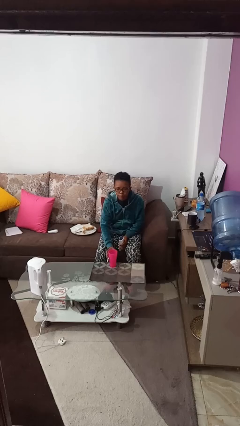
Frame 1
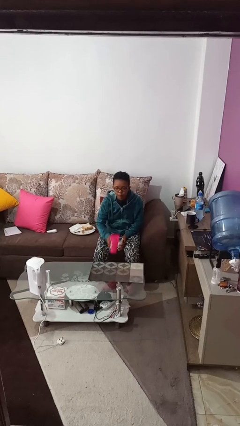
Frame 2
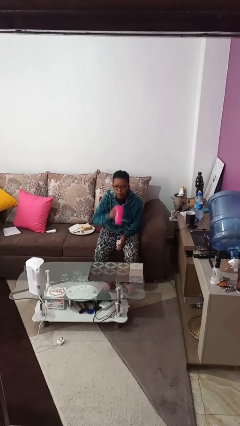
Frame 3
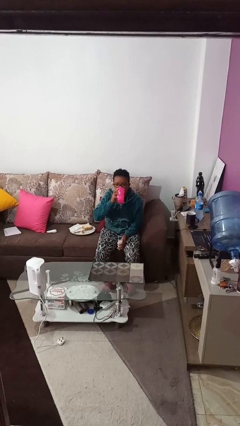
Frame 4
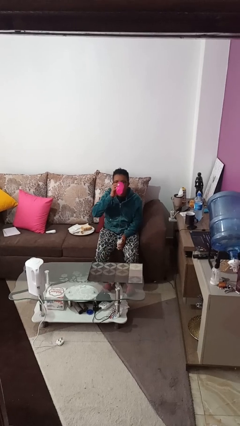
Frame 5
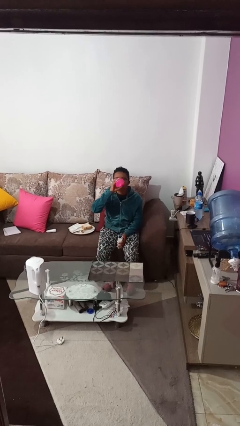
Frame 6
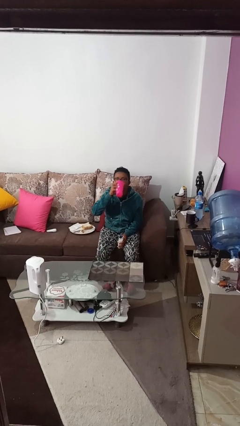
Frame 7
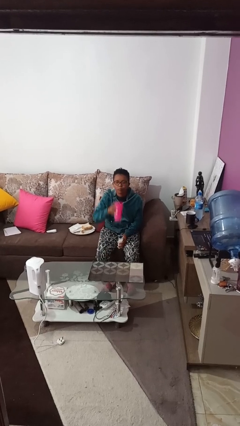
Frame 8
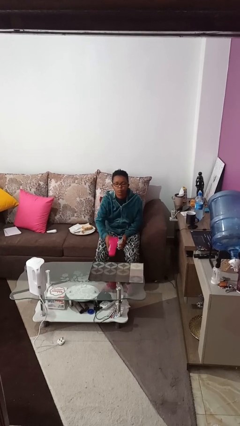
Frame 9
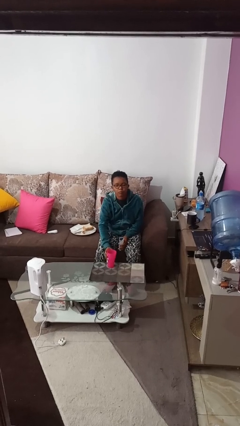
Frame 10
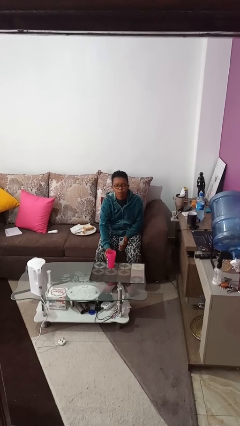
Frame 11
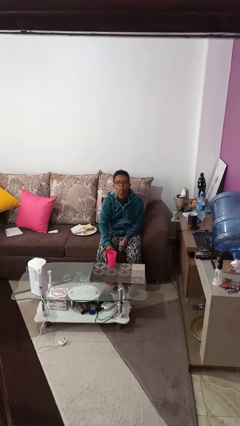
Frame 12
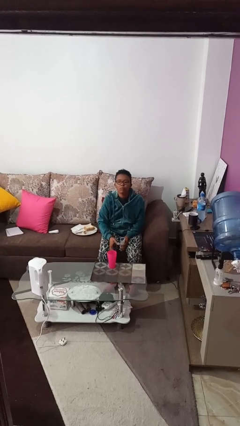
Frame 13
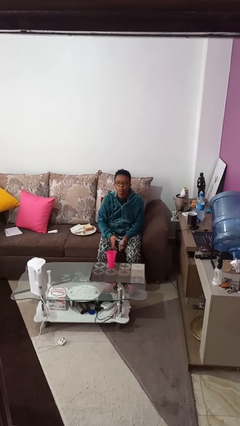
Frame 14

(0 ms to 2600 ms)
person drinks from cup

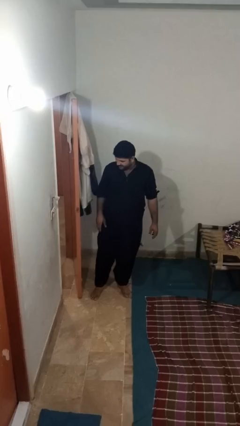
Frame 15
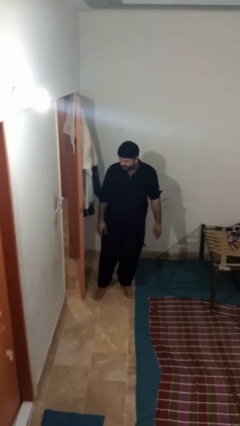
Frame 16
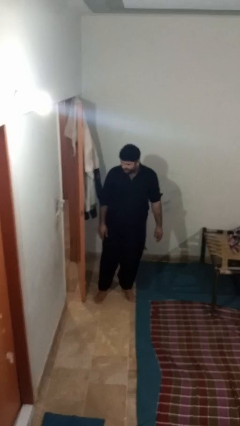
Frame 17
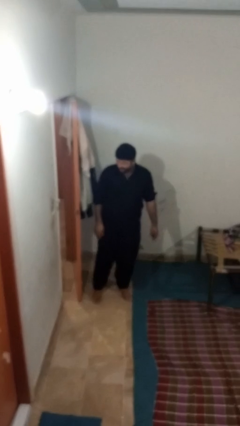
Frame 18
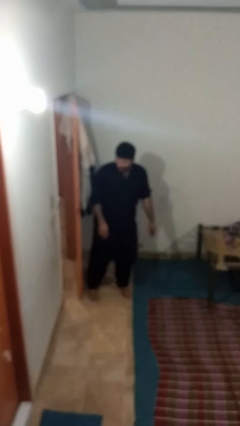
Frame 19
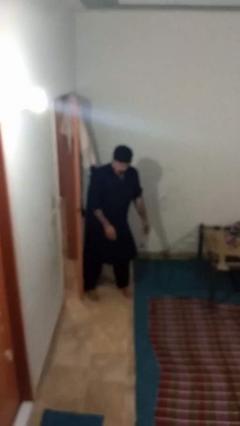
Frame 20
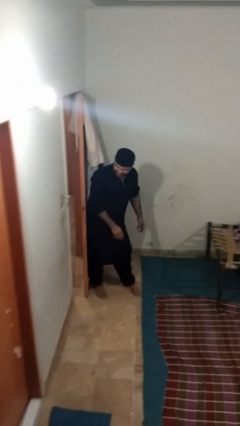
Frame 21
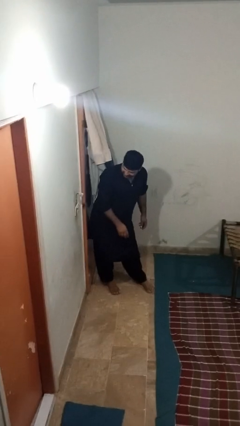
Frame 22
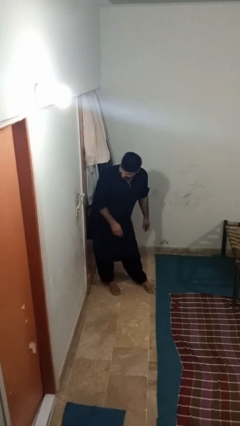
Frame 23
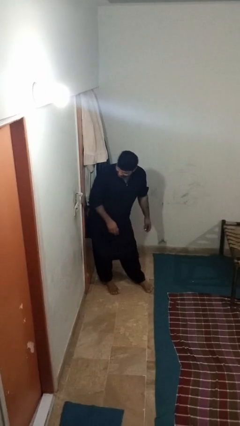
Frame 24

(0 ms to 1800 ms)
person closes door with hip

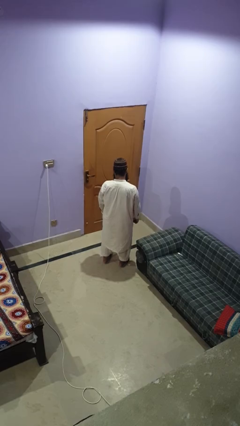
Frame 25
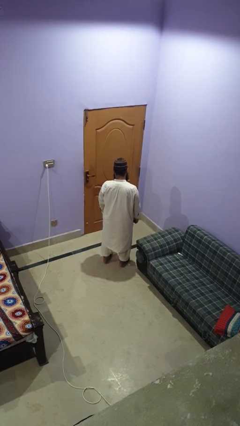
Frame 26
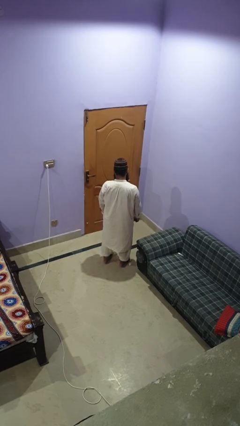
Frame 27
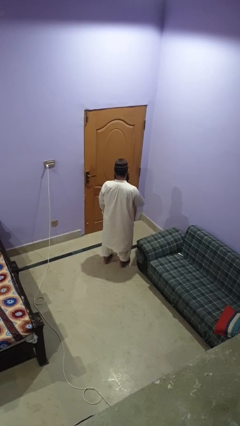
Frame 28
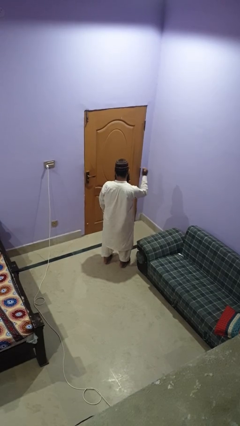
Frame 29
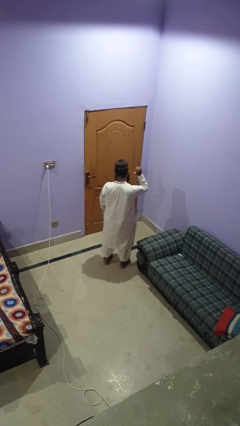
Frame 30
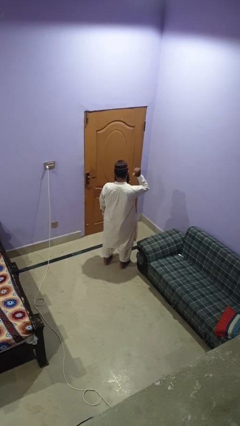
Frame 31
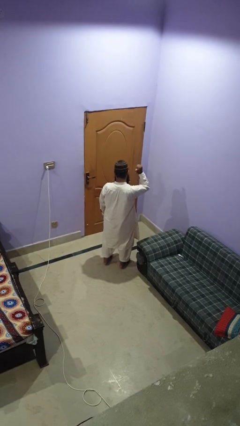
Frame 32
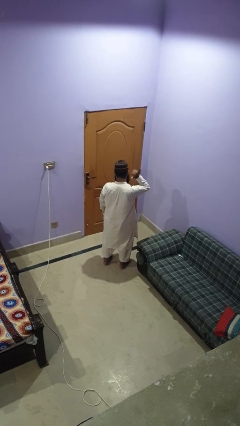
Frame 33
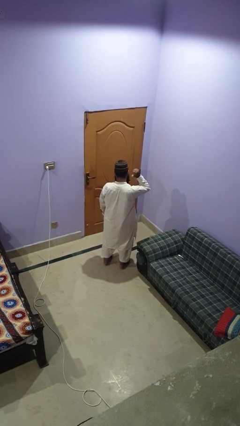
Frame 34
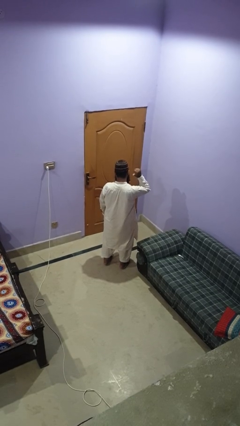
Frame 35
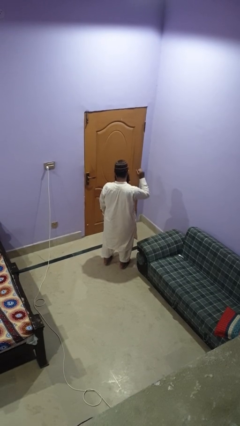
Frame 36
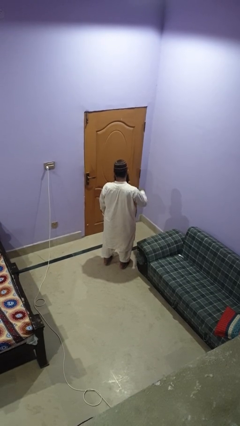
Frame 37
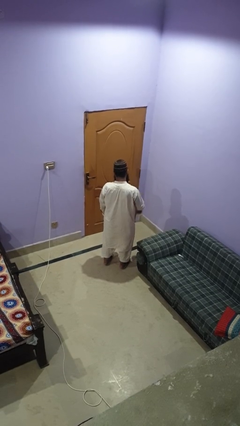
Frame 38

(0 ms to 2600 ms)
person gestures behind me

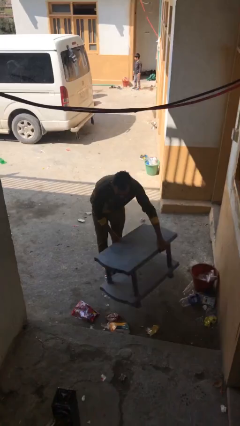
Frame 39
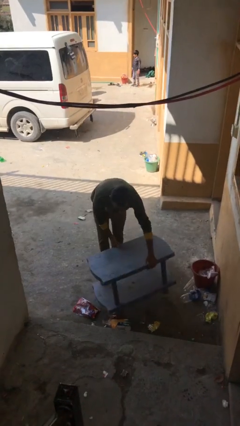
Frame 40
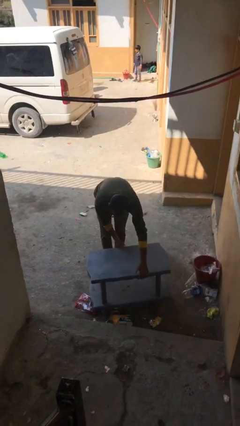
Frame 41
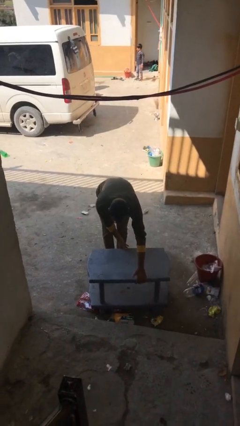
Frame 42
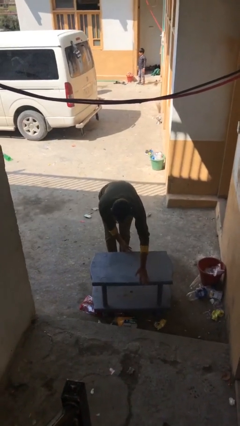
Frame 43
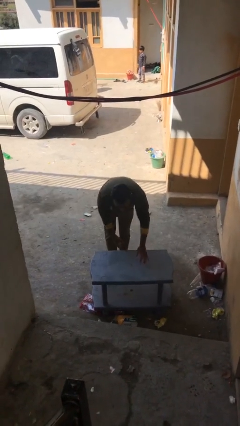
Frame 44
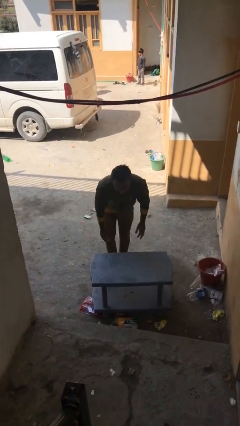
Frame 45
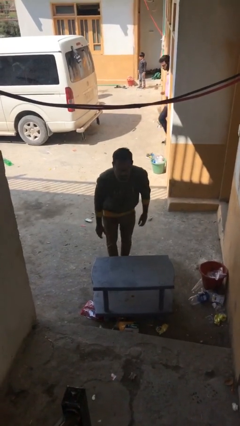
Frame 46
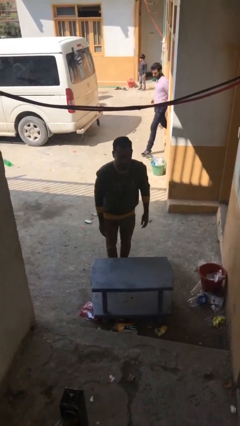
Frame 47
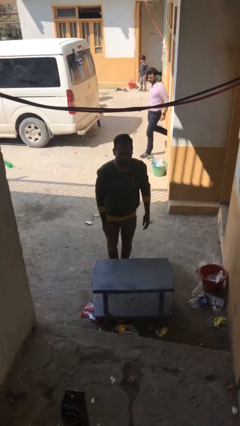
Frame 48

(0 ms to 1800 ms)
person puts down object on floor

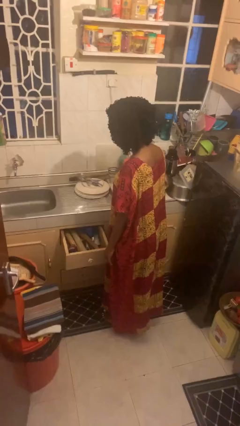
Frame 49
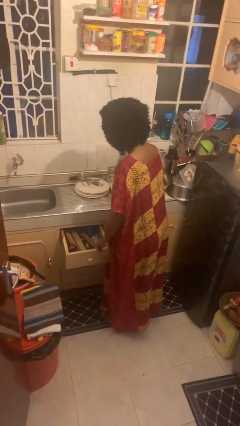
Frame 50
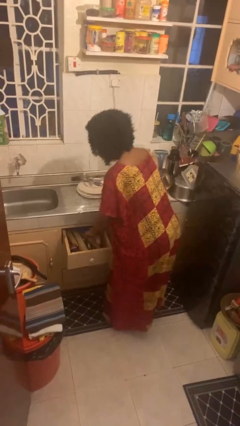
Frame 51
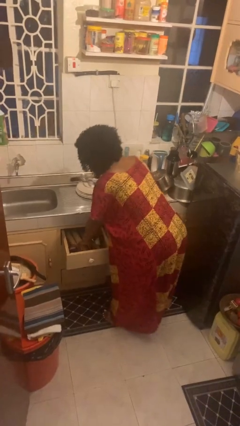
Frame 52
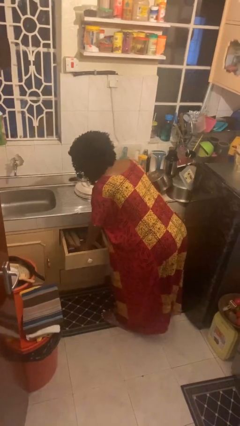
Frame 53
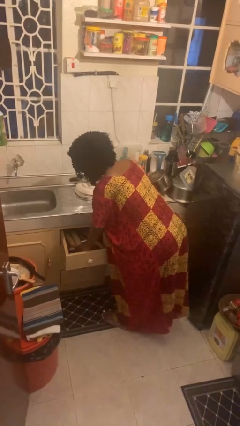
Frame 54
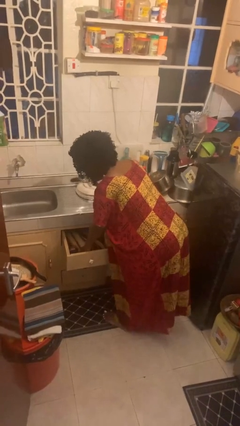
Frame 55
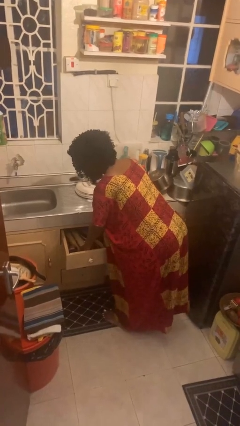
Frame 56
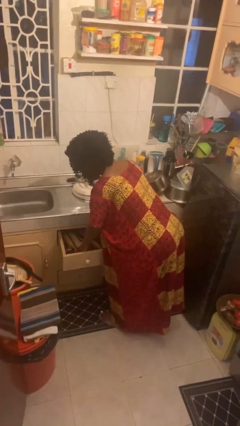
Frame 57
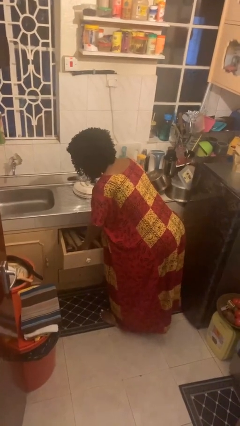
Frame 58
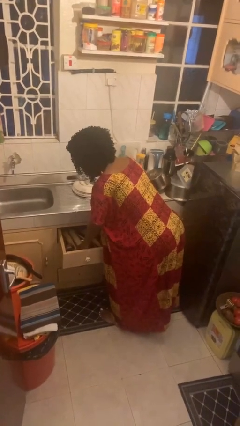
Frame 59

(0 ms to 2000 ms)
person searches in kitchen drawer

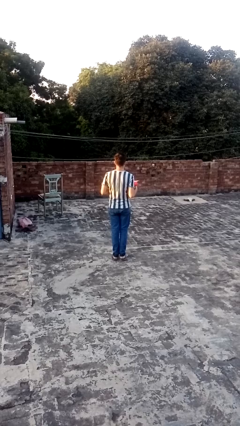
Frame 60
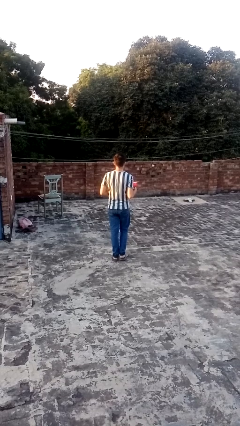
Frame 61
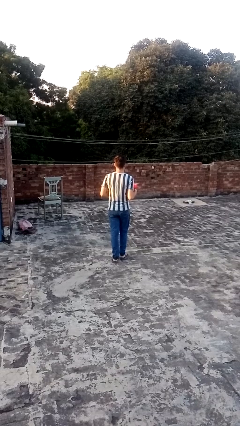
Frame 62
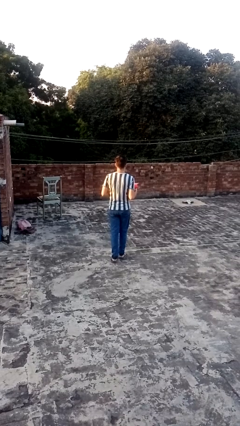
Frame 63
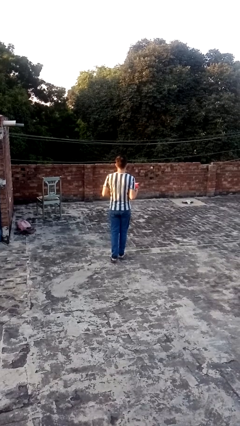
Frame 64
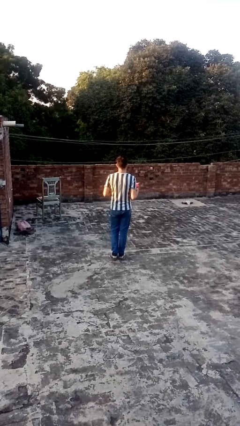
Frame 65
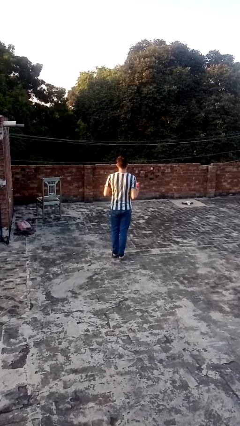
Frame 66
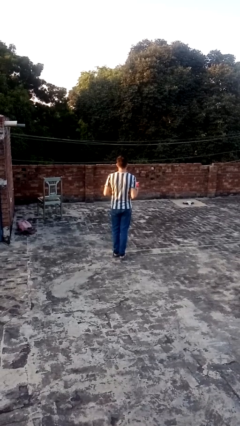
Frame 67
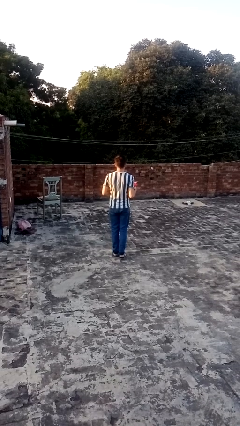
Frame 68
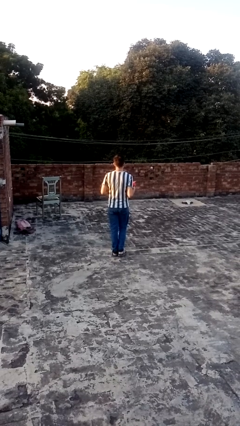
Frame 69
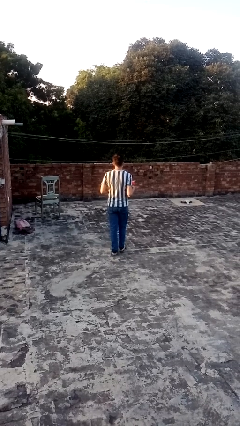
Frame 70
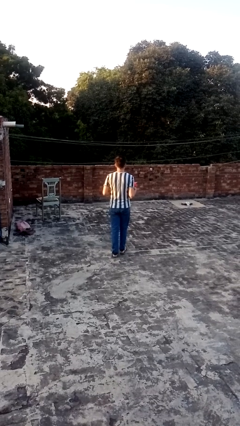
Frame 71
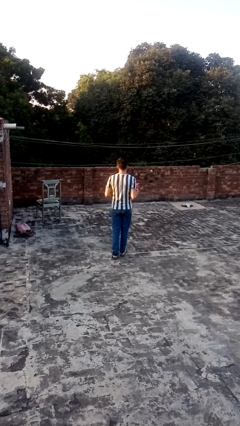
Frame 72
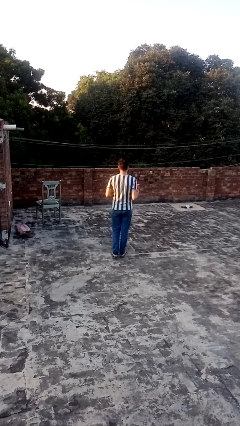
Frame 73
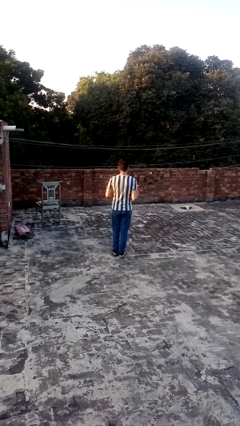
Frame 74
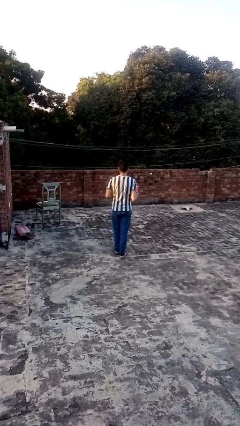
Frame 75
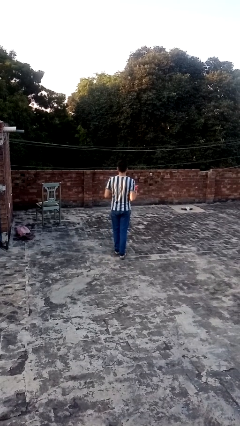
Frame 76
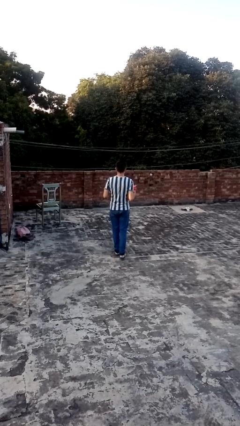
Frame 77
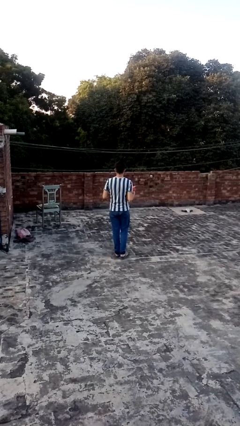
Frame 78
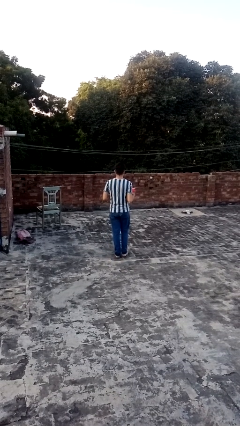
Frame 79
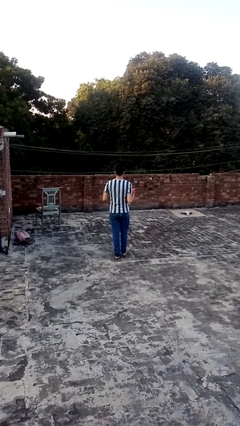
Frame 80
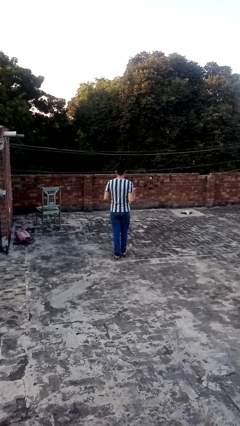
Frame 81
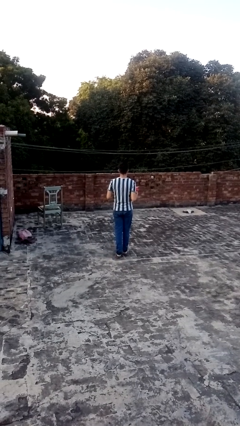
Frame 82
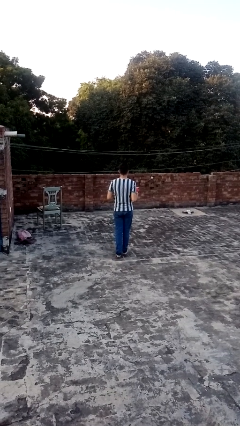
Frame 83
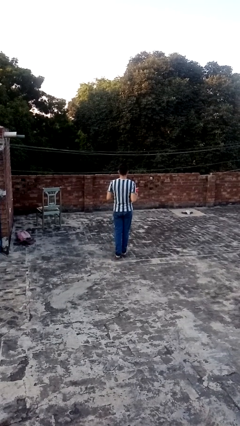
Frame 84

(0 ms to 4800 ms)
person carries laundry basket

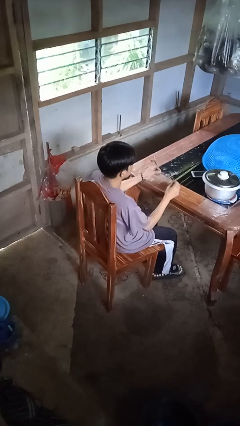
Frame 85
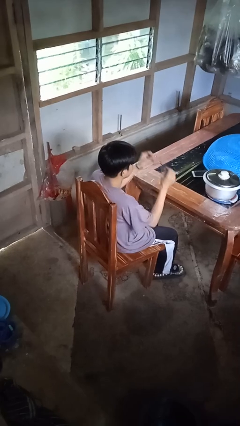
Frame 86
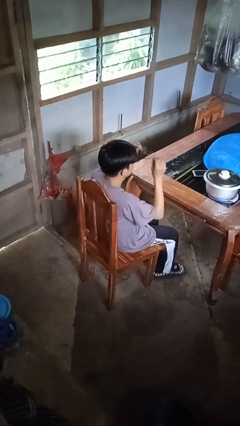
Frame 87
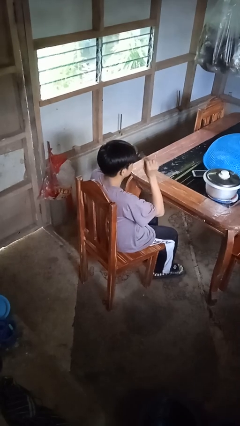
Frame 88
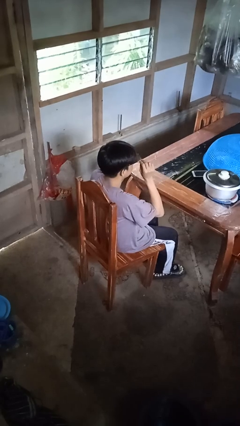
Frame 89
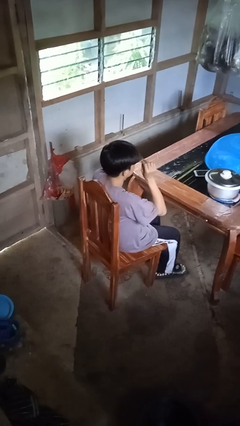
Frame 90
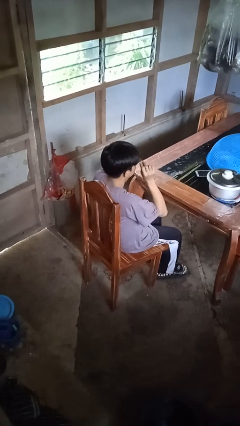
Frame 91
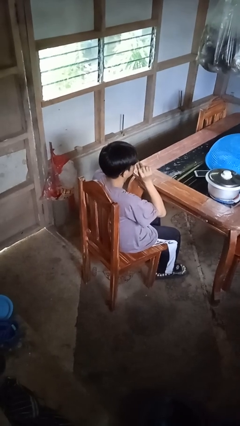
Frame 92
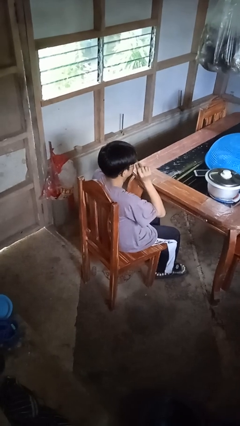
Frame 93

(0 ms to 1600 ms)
person puts on glasses
